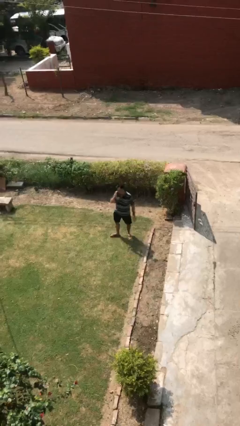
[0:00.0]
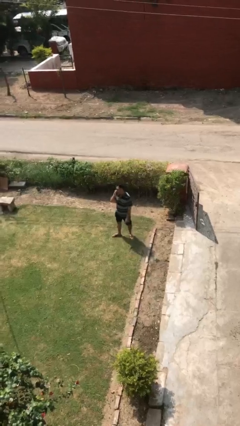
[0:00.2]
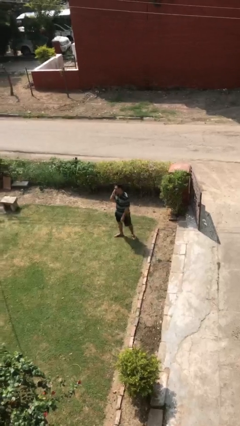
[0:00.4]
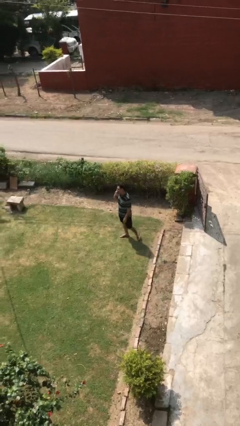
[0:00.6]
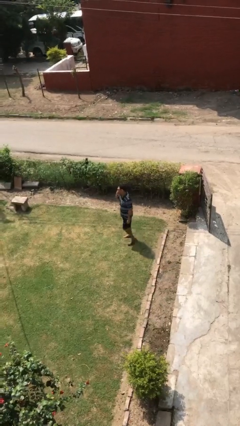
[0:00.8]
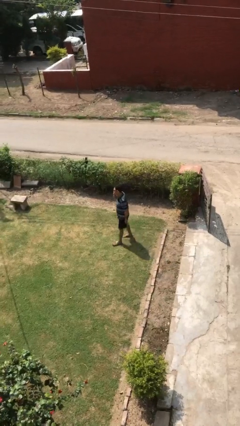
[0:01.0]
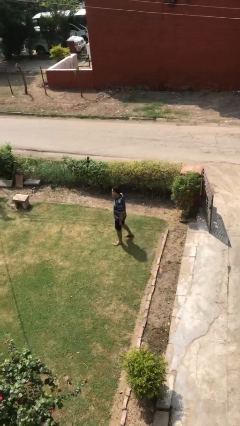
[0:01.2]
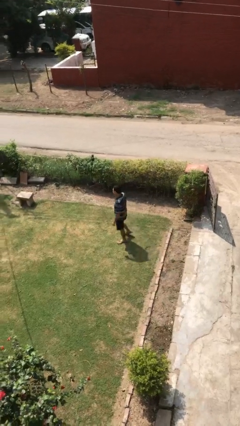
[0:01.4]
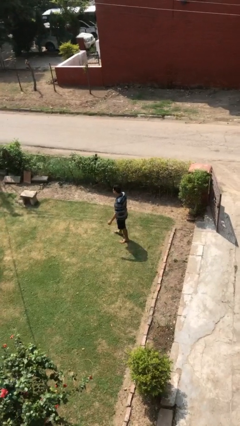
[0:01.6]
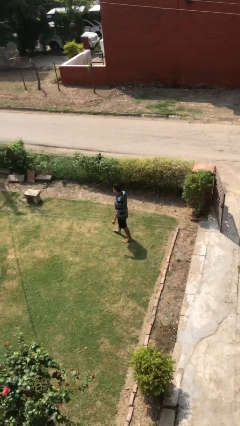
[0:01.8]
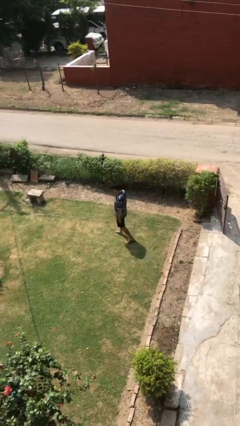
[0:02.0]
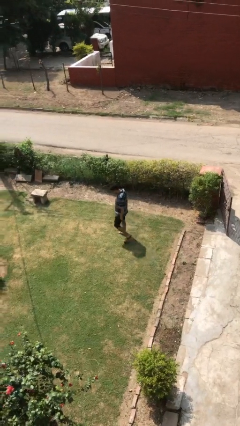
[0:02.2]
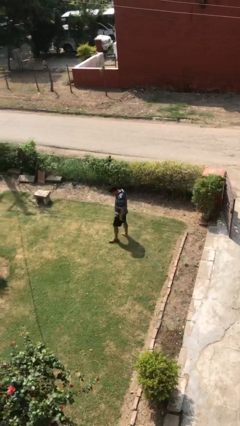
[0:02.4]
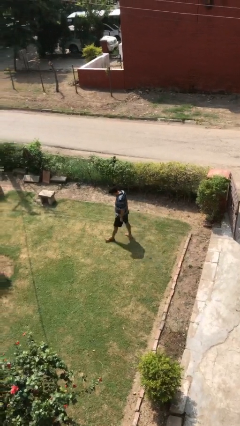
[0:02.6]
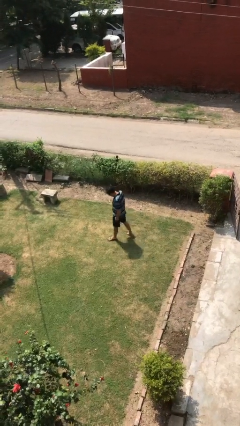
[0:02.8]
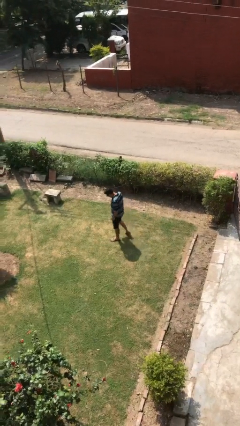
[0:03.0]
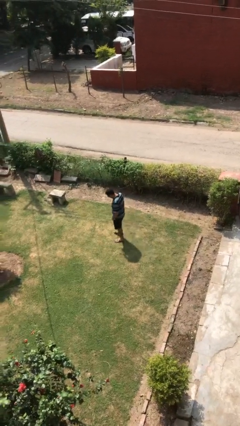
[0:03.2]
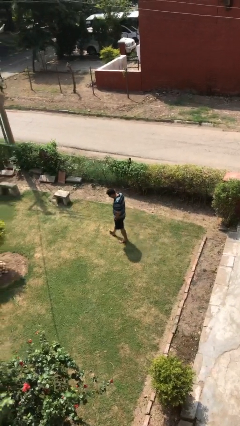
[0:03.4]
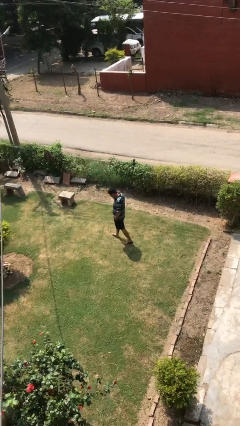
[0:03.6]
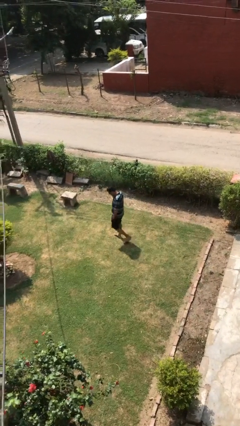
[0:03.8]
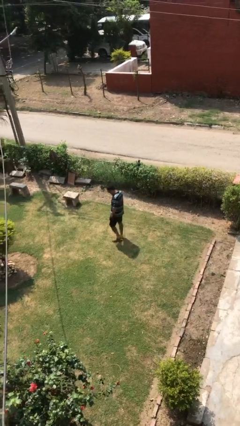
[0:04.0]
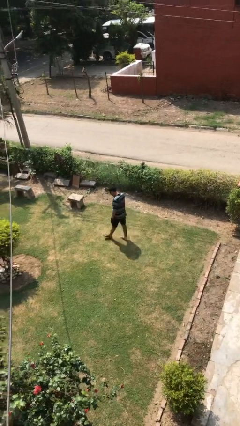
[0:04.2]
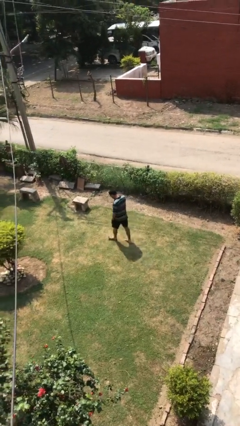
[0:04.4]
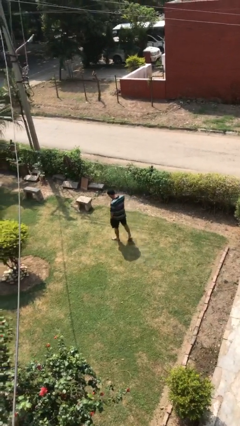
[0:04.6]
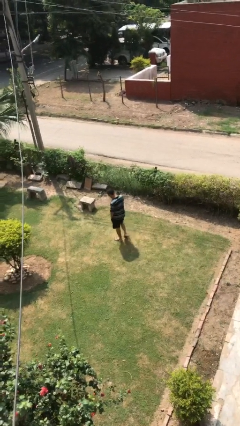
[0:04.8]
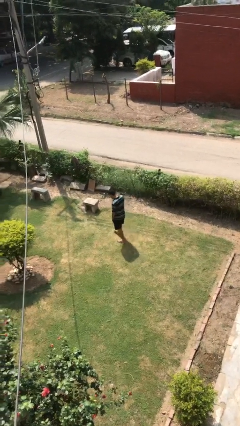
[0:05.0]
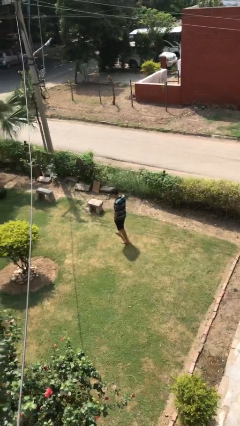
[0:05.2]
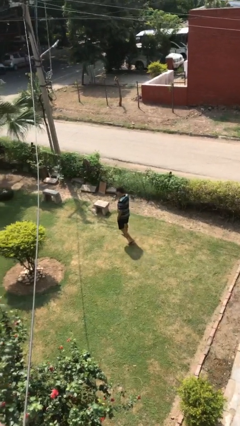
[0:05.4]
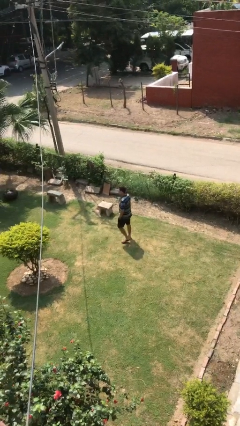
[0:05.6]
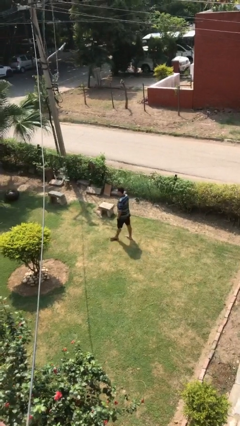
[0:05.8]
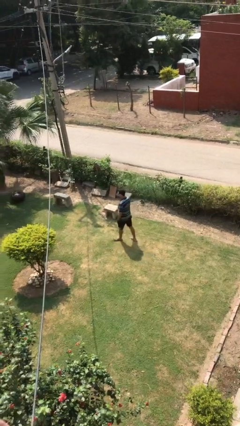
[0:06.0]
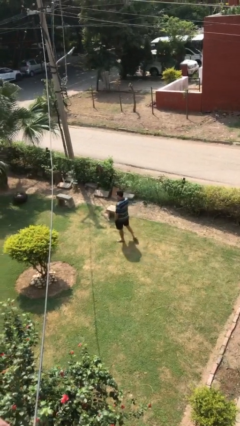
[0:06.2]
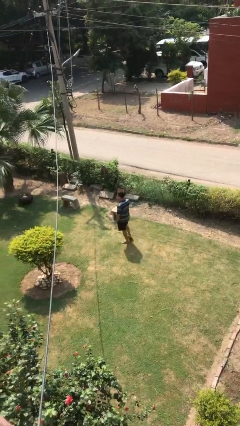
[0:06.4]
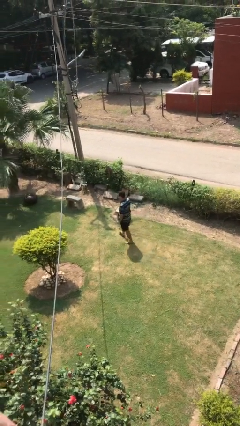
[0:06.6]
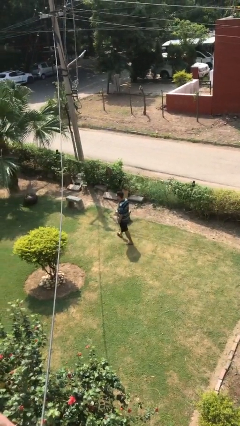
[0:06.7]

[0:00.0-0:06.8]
person talks on phone

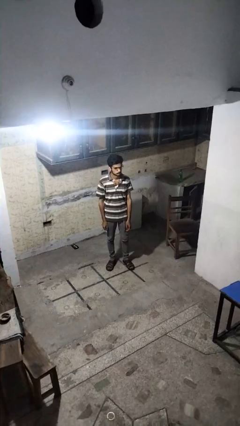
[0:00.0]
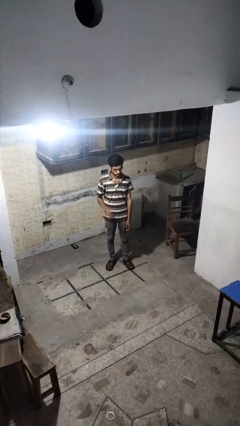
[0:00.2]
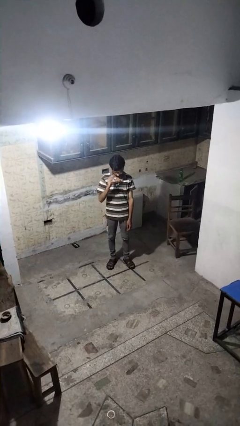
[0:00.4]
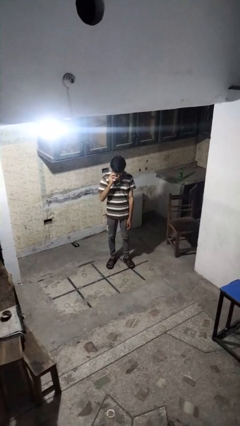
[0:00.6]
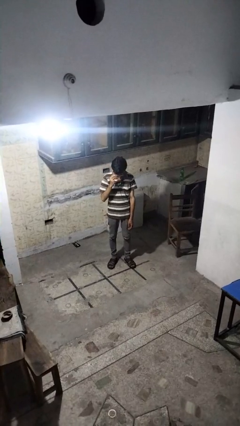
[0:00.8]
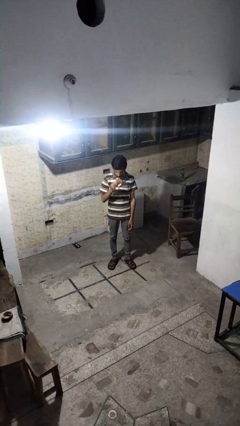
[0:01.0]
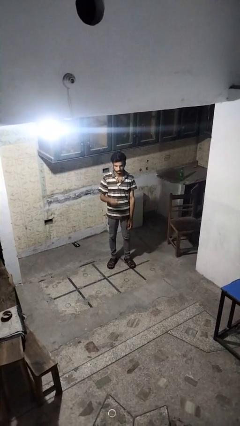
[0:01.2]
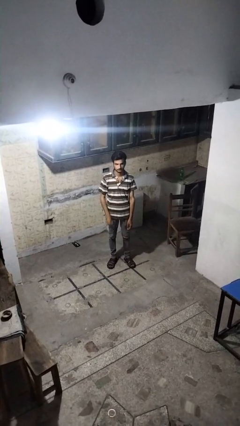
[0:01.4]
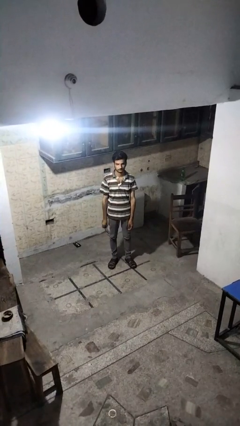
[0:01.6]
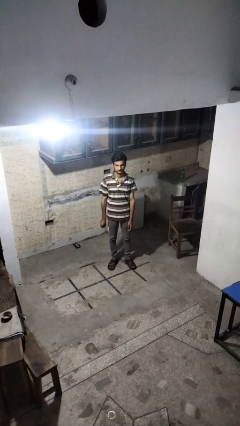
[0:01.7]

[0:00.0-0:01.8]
person takes off glasses

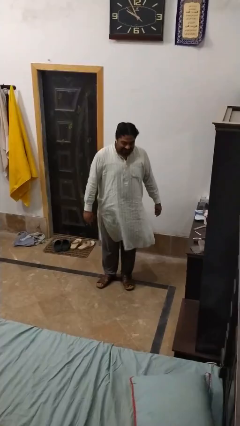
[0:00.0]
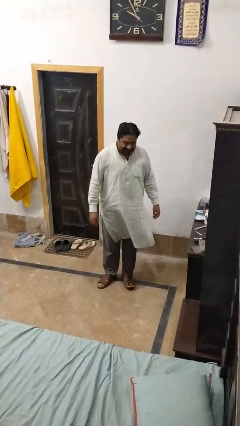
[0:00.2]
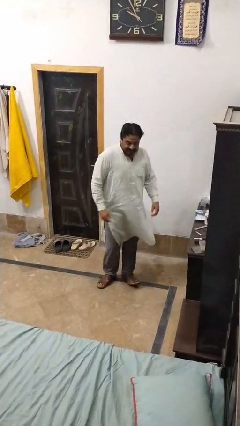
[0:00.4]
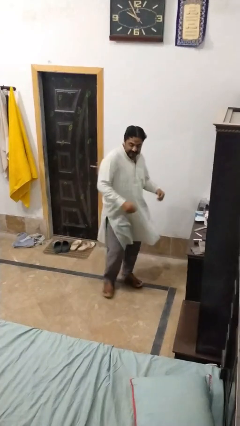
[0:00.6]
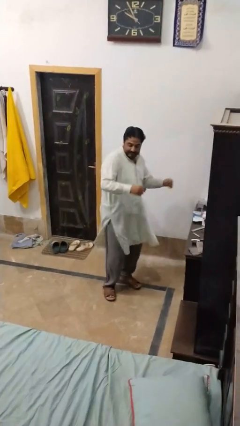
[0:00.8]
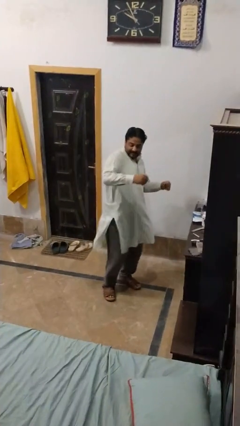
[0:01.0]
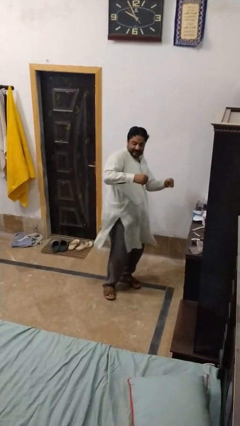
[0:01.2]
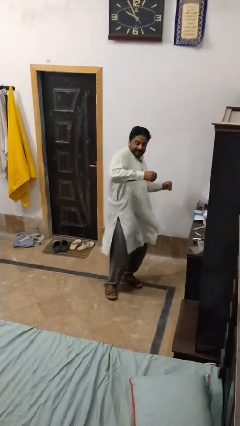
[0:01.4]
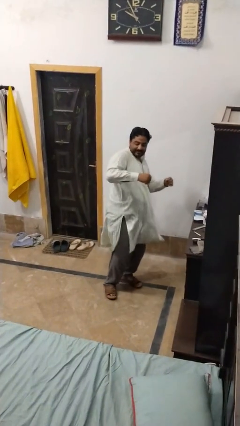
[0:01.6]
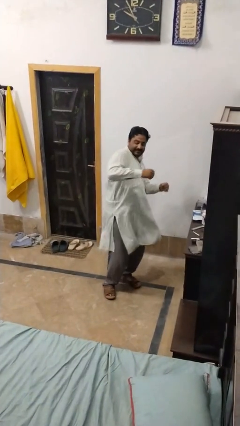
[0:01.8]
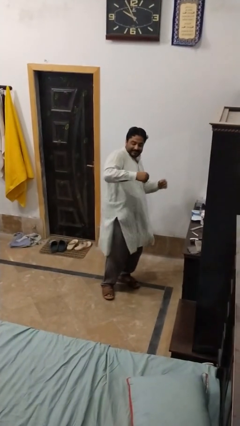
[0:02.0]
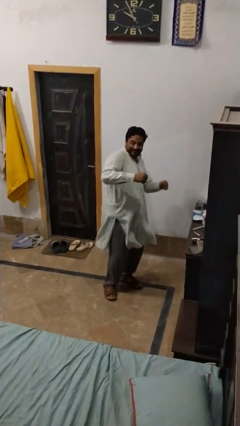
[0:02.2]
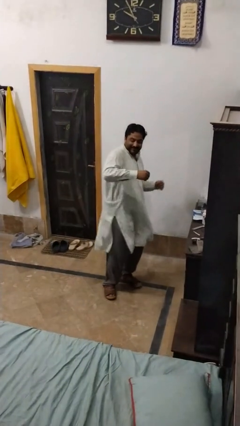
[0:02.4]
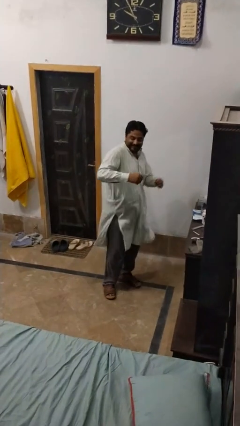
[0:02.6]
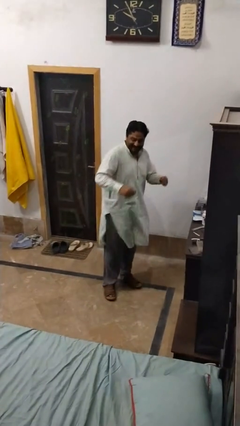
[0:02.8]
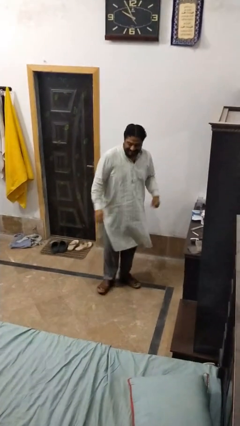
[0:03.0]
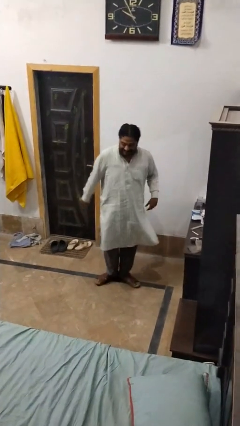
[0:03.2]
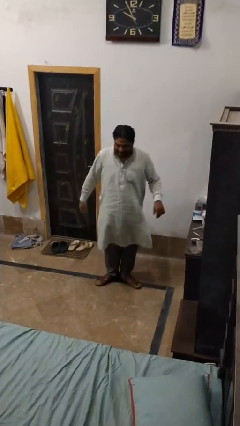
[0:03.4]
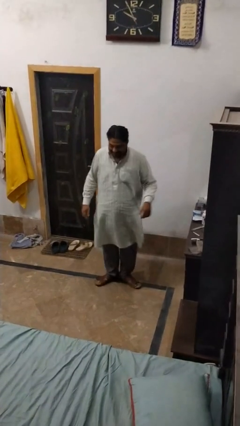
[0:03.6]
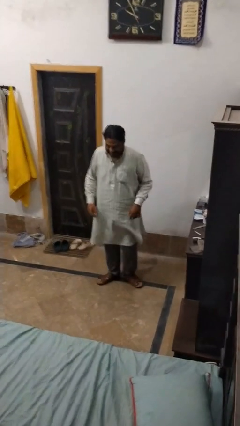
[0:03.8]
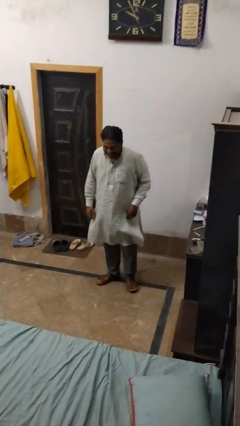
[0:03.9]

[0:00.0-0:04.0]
person dances in place

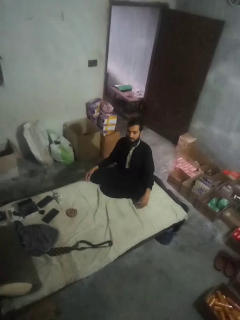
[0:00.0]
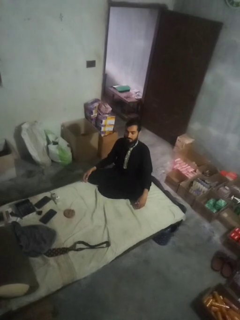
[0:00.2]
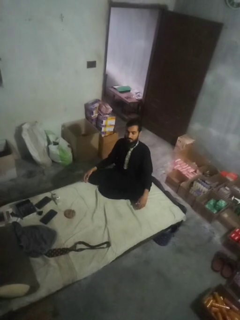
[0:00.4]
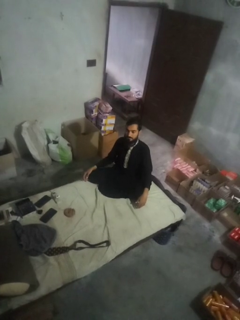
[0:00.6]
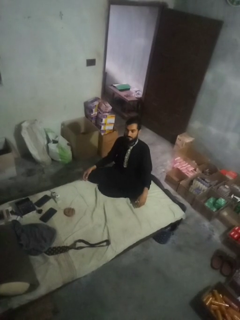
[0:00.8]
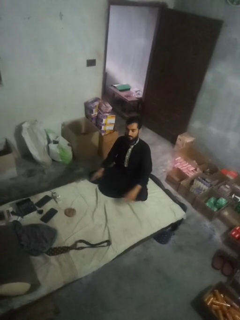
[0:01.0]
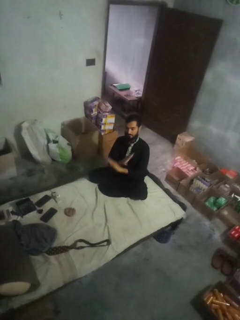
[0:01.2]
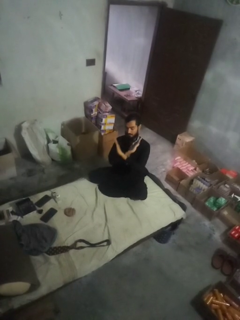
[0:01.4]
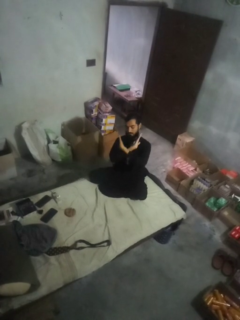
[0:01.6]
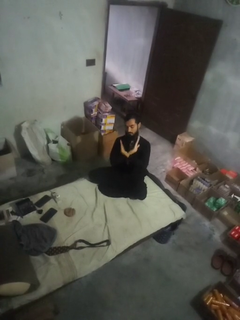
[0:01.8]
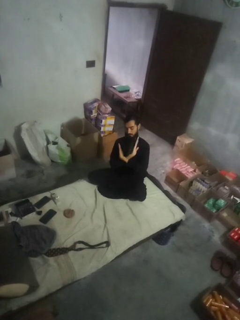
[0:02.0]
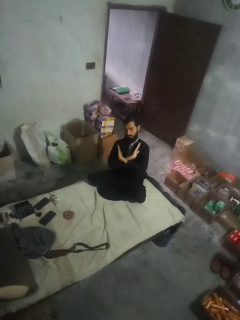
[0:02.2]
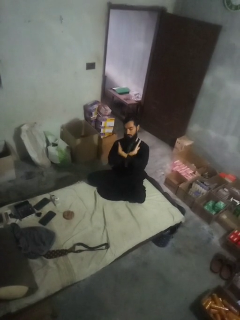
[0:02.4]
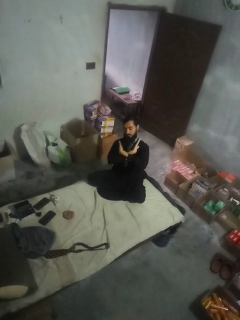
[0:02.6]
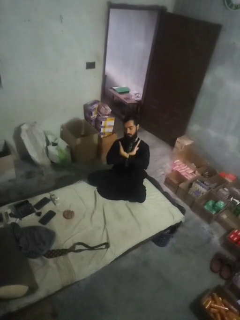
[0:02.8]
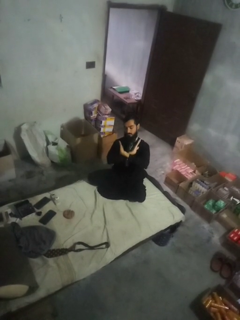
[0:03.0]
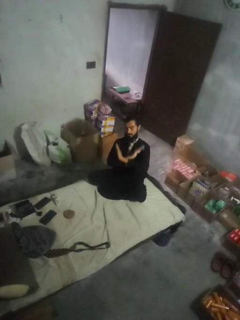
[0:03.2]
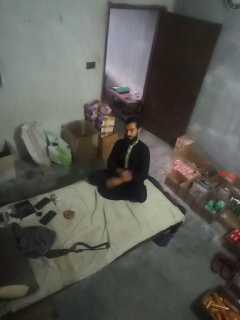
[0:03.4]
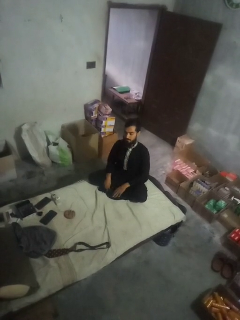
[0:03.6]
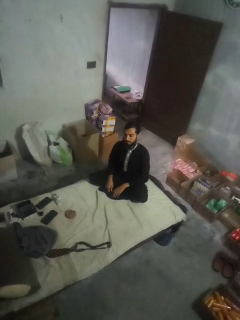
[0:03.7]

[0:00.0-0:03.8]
person gestures arms x

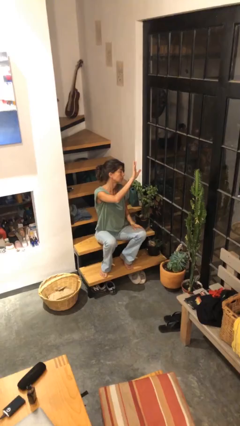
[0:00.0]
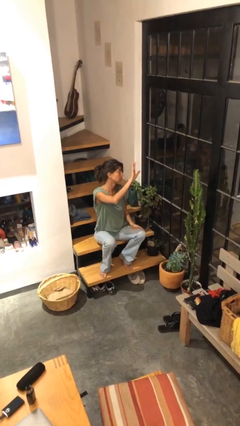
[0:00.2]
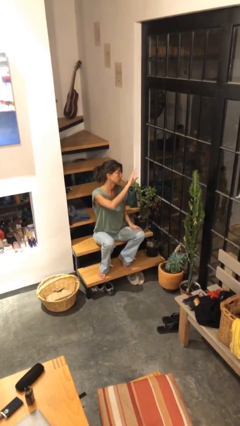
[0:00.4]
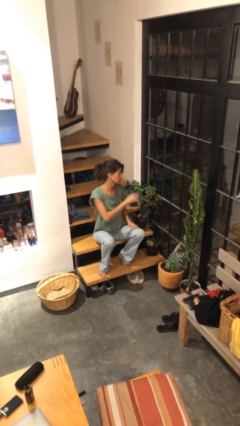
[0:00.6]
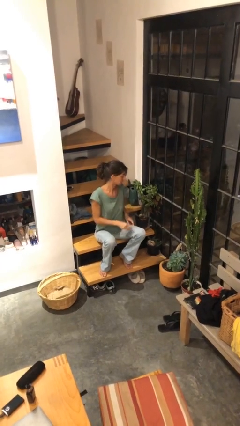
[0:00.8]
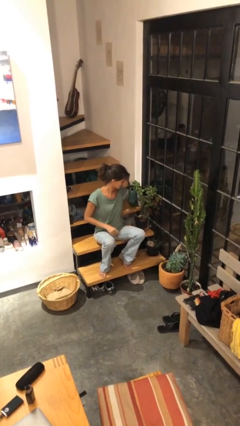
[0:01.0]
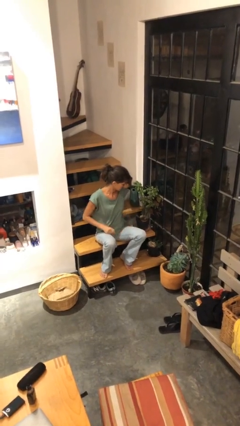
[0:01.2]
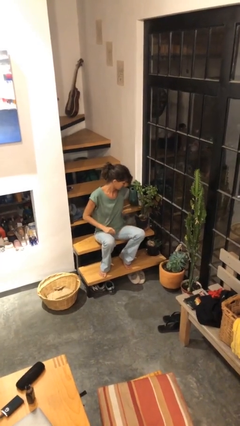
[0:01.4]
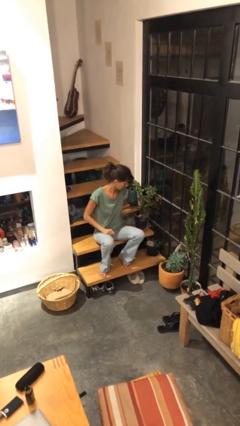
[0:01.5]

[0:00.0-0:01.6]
person gestures lower hand
